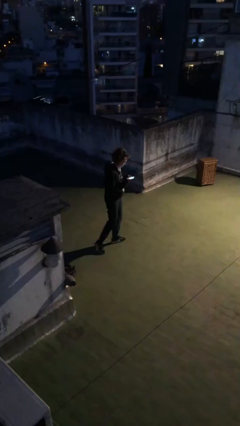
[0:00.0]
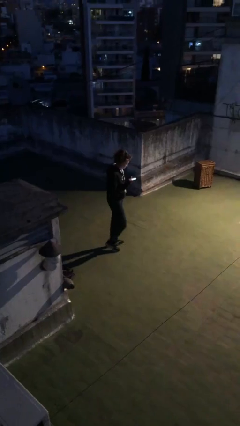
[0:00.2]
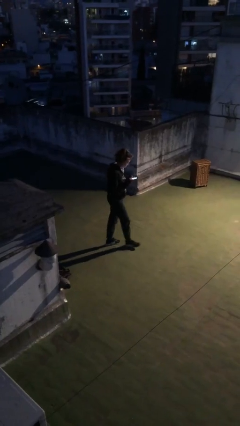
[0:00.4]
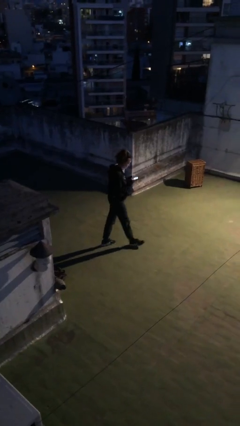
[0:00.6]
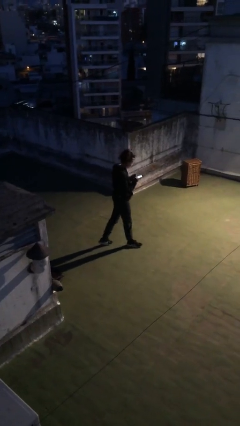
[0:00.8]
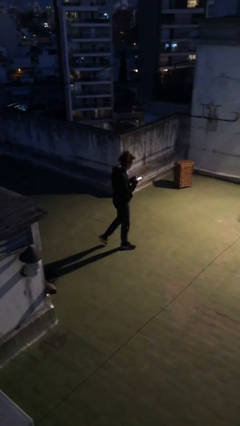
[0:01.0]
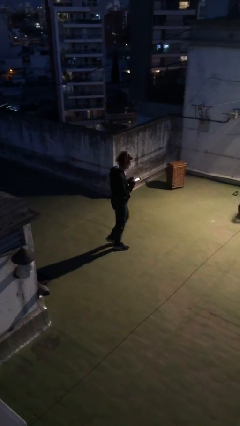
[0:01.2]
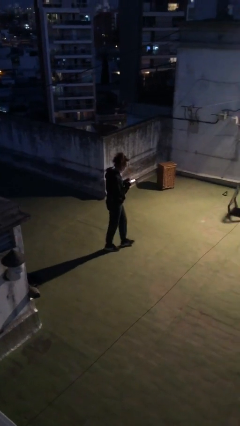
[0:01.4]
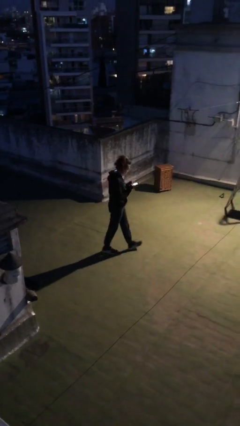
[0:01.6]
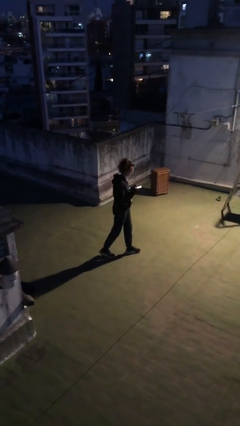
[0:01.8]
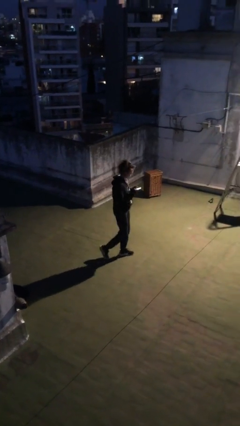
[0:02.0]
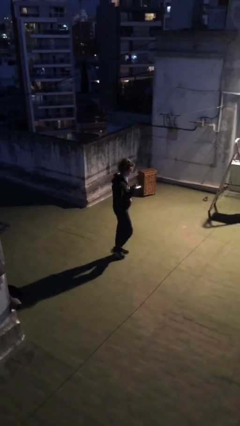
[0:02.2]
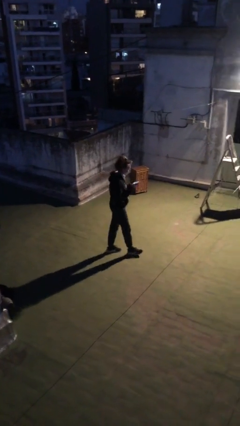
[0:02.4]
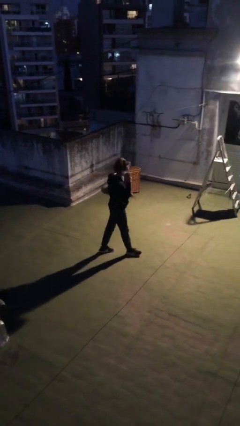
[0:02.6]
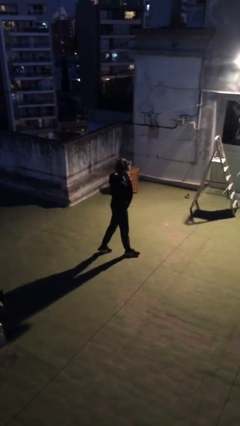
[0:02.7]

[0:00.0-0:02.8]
person texts on phone

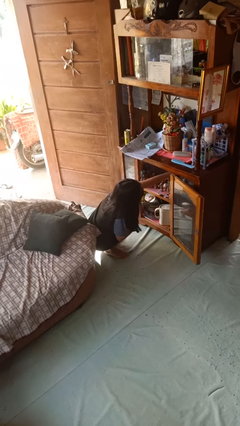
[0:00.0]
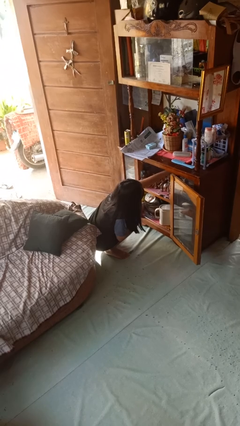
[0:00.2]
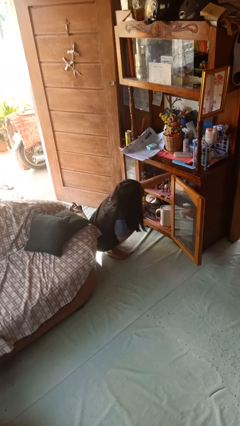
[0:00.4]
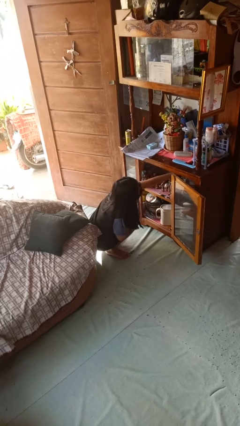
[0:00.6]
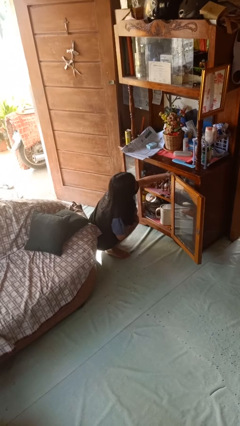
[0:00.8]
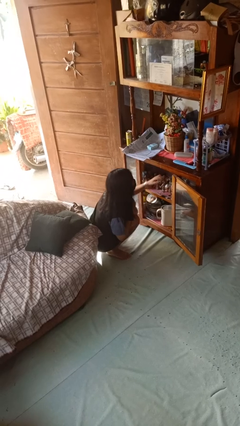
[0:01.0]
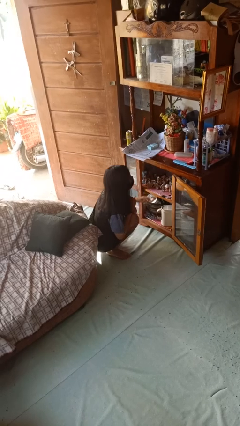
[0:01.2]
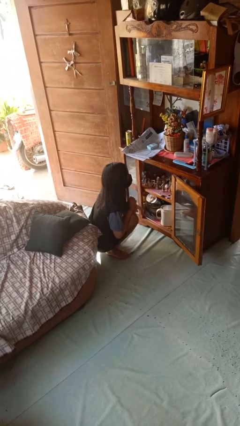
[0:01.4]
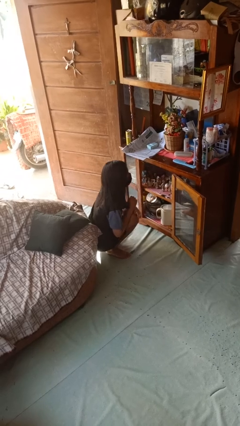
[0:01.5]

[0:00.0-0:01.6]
person searches in cabinet

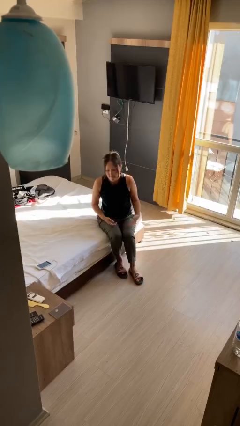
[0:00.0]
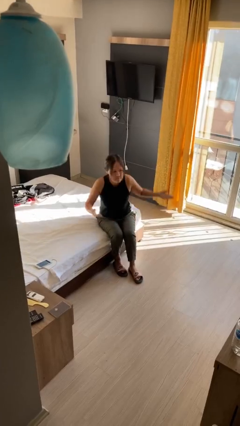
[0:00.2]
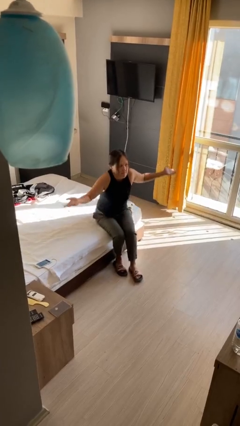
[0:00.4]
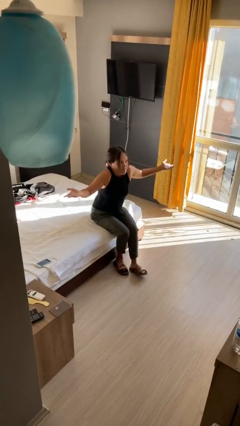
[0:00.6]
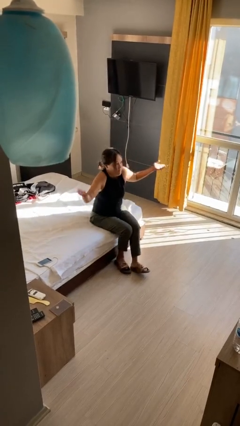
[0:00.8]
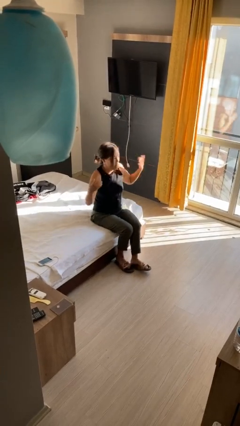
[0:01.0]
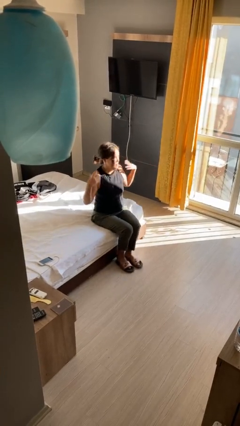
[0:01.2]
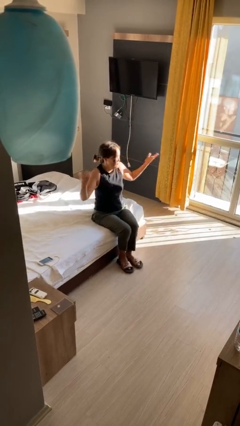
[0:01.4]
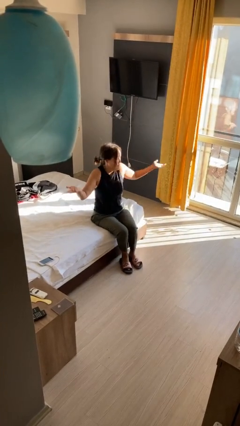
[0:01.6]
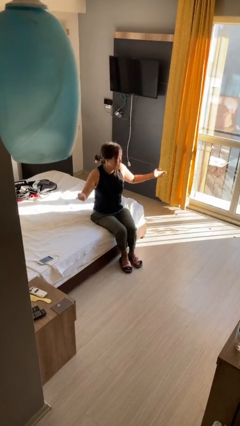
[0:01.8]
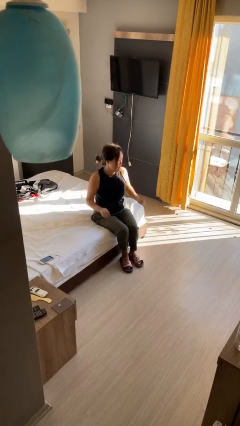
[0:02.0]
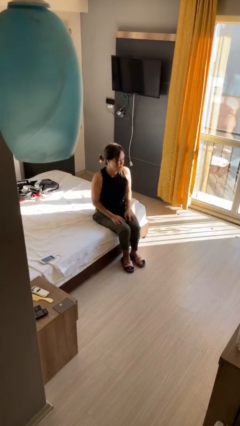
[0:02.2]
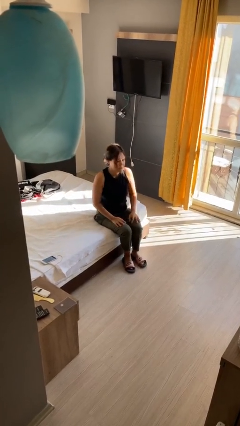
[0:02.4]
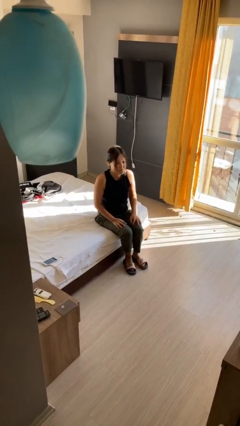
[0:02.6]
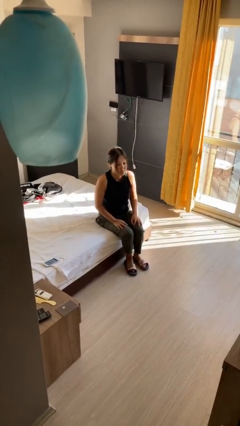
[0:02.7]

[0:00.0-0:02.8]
person shrugs

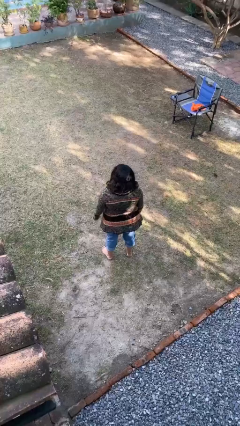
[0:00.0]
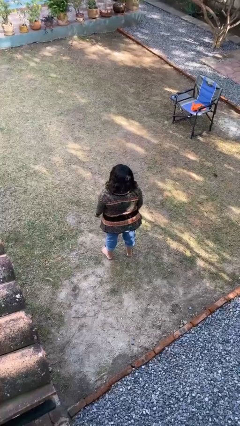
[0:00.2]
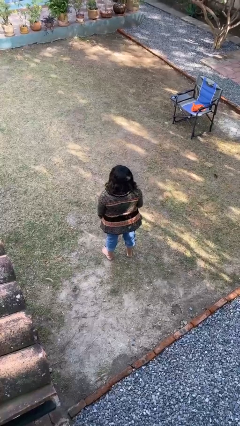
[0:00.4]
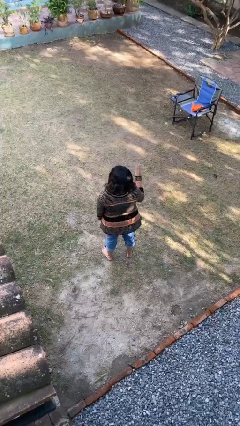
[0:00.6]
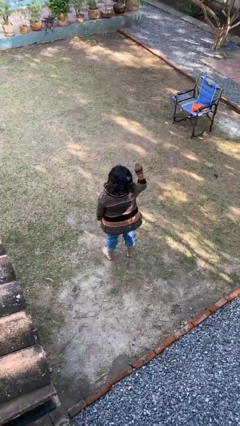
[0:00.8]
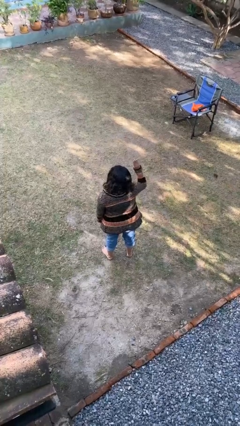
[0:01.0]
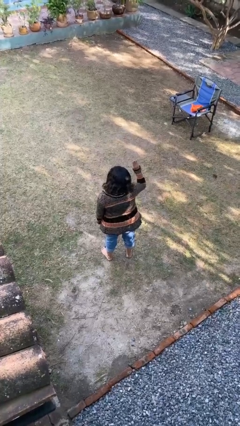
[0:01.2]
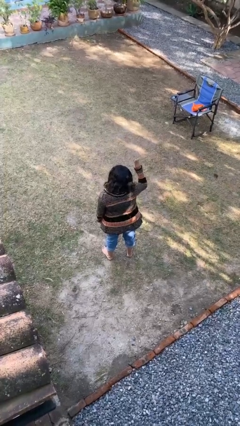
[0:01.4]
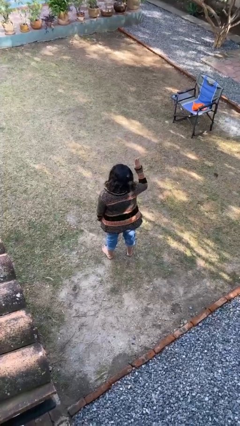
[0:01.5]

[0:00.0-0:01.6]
person gestures number three

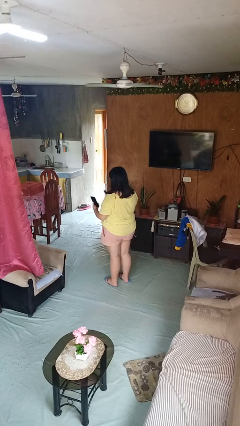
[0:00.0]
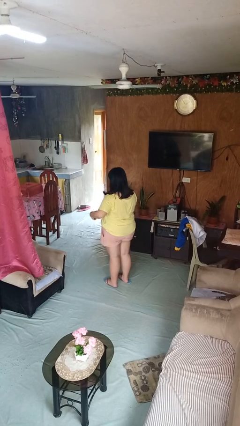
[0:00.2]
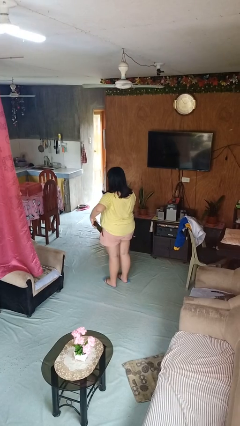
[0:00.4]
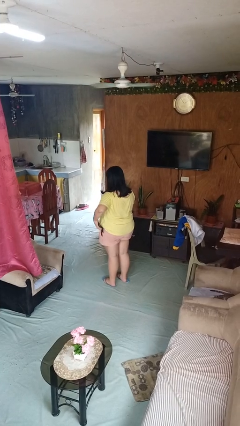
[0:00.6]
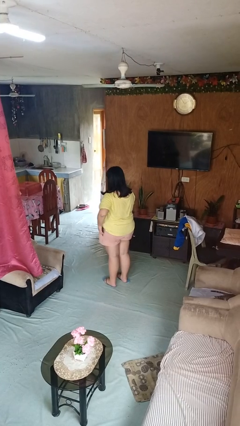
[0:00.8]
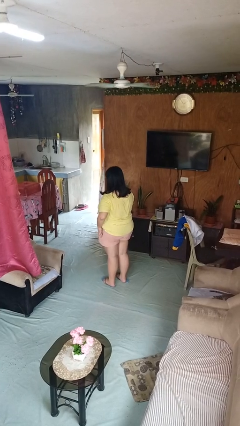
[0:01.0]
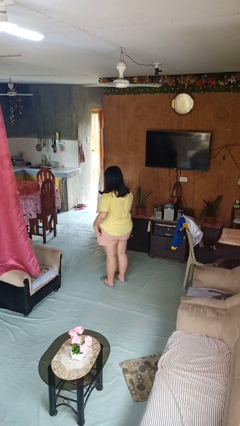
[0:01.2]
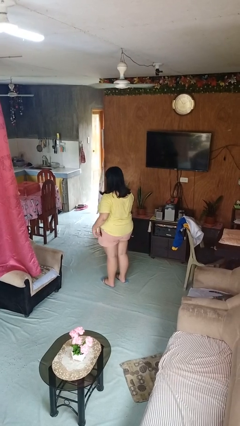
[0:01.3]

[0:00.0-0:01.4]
person puts phone into pocket

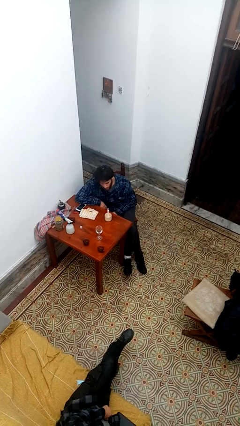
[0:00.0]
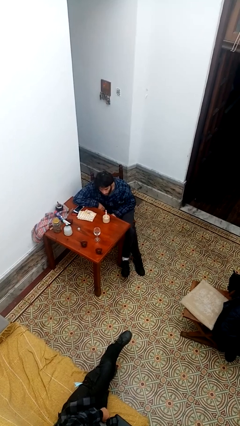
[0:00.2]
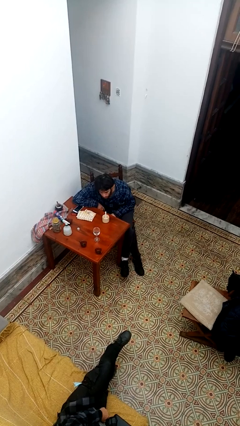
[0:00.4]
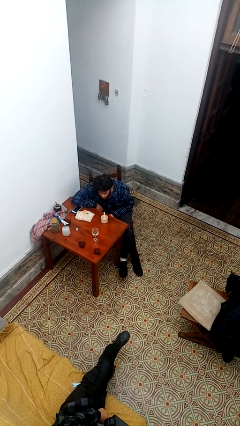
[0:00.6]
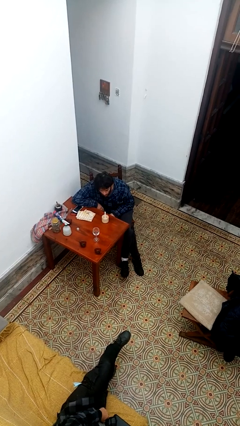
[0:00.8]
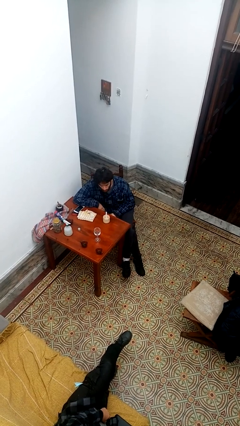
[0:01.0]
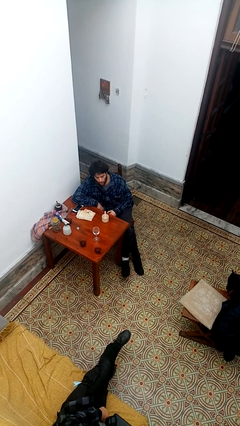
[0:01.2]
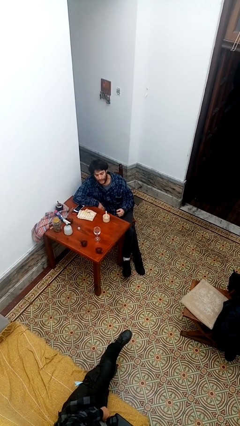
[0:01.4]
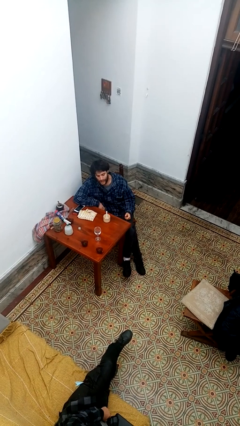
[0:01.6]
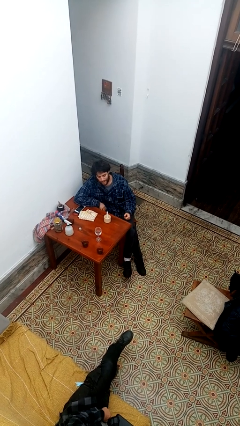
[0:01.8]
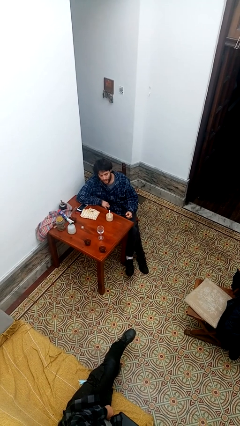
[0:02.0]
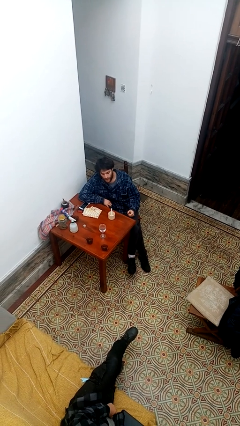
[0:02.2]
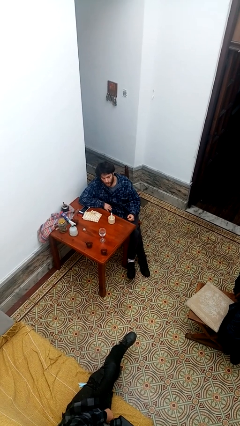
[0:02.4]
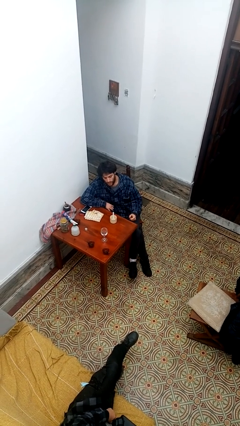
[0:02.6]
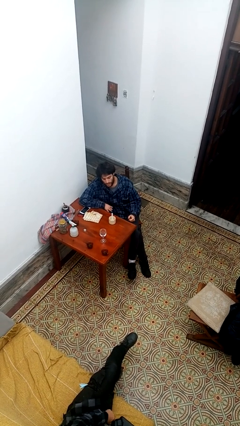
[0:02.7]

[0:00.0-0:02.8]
person extinguishes candle

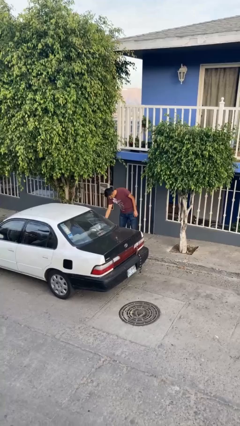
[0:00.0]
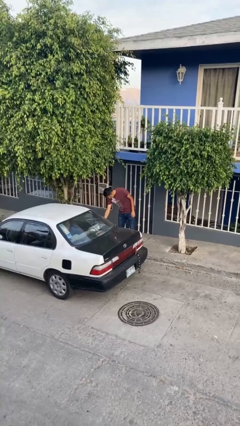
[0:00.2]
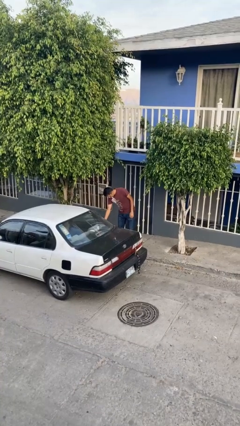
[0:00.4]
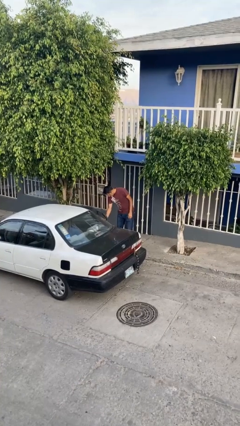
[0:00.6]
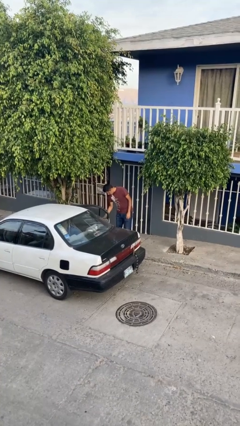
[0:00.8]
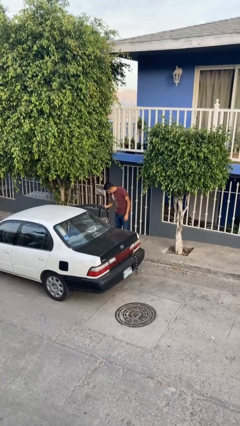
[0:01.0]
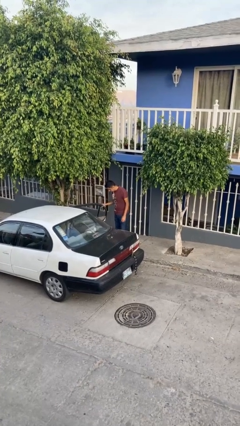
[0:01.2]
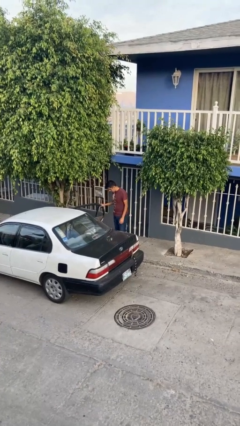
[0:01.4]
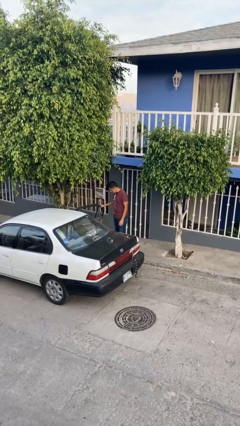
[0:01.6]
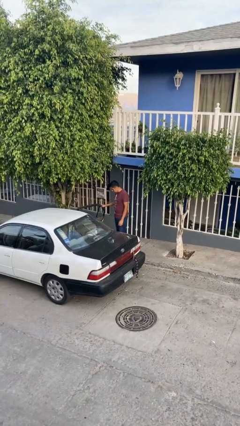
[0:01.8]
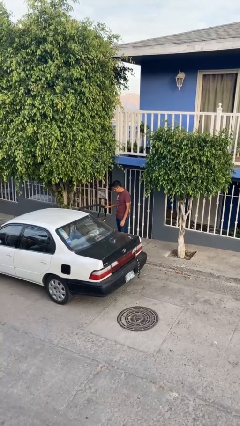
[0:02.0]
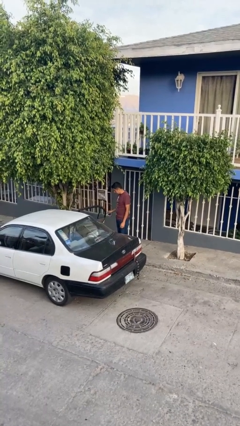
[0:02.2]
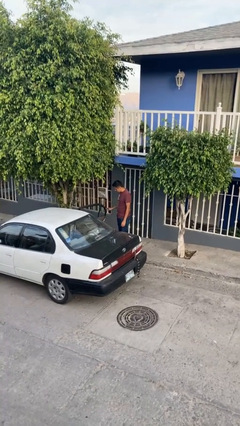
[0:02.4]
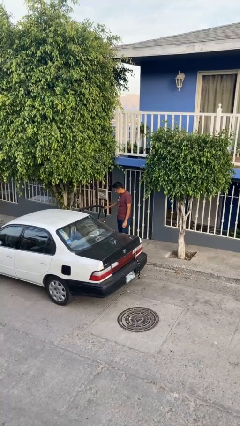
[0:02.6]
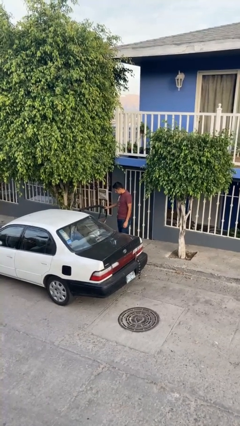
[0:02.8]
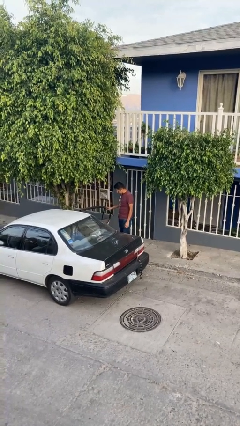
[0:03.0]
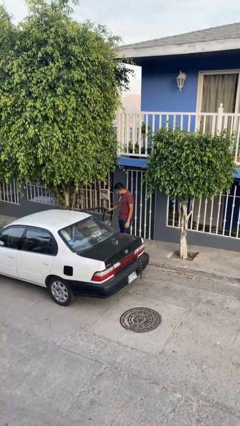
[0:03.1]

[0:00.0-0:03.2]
person opens car door

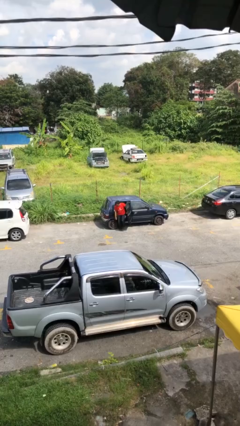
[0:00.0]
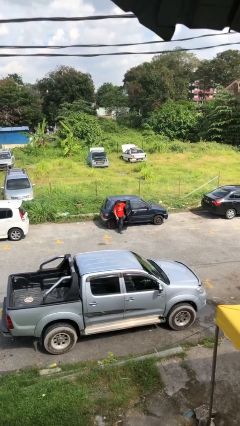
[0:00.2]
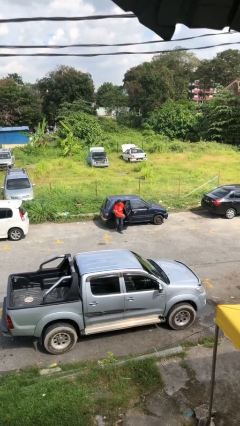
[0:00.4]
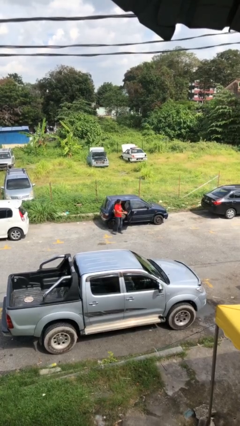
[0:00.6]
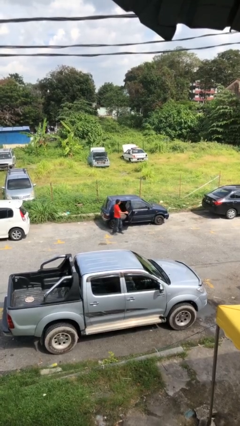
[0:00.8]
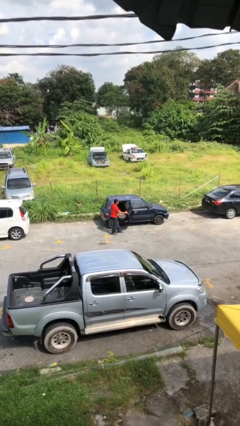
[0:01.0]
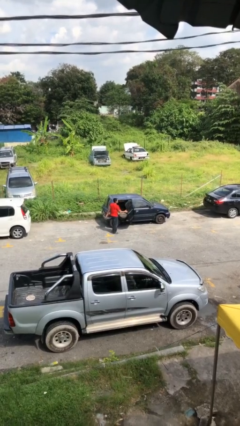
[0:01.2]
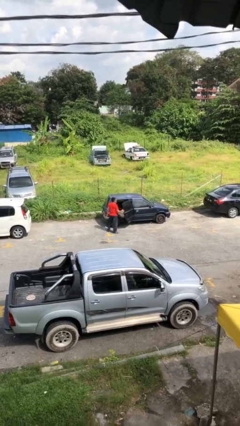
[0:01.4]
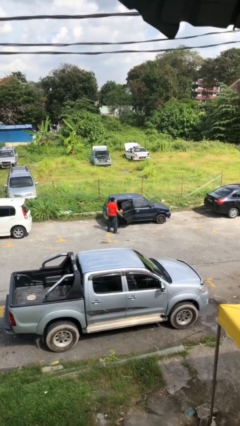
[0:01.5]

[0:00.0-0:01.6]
person exits car
